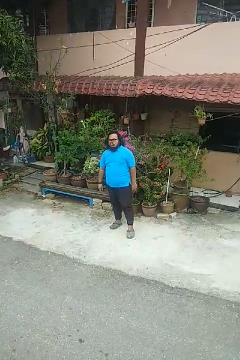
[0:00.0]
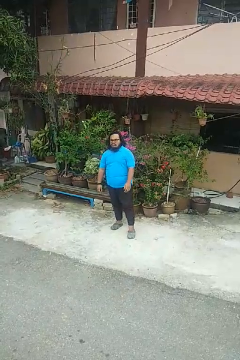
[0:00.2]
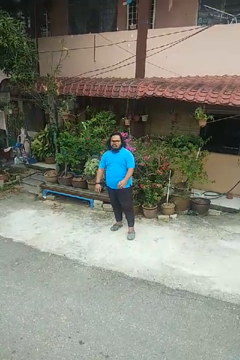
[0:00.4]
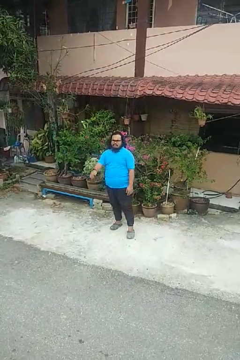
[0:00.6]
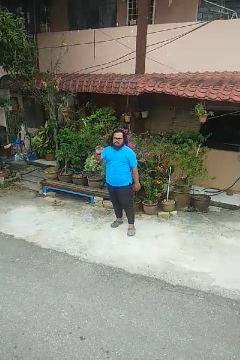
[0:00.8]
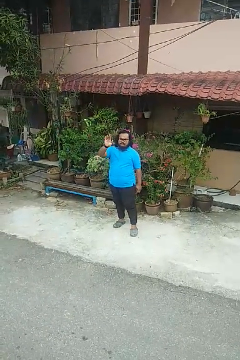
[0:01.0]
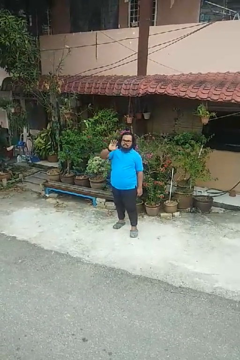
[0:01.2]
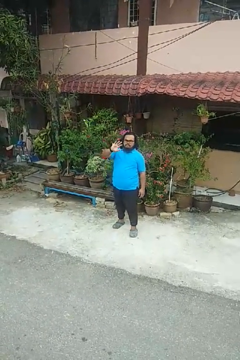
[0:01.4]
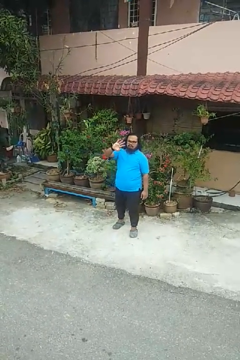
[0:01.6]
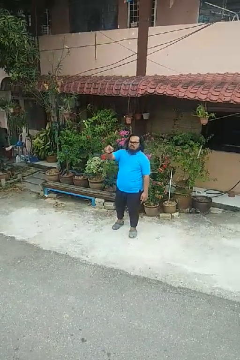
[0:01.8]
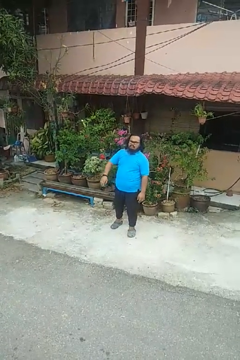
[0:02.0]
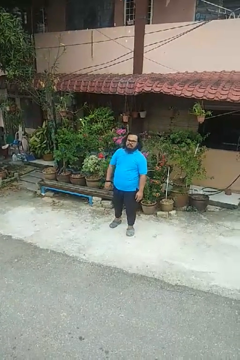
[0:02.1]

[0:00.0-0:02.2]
person waves at person

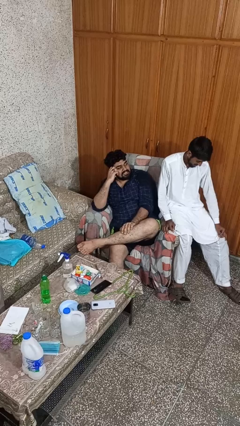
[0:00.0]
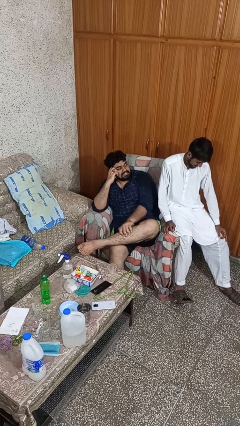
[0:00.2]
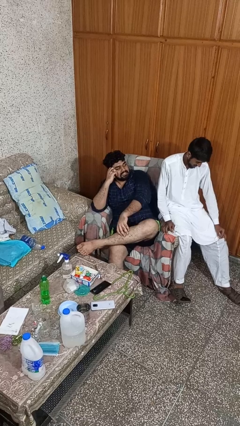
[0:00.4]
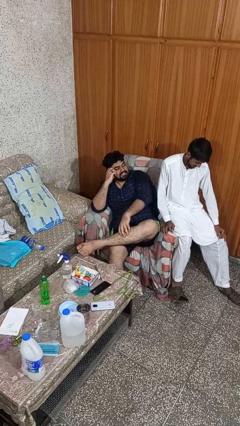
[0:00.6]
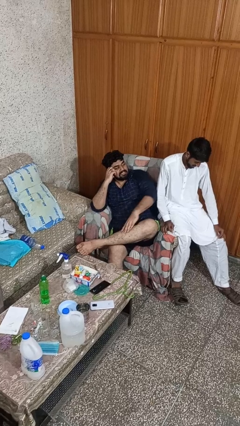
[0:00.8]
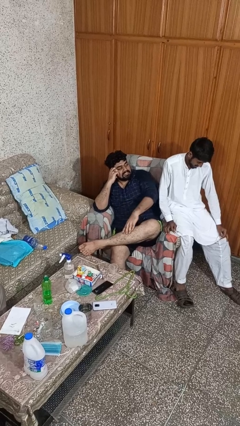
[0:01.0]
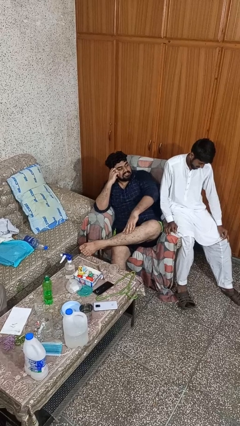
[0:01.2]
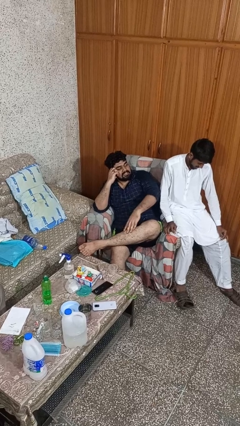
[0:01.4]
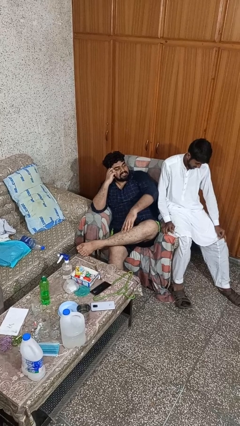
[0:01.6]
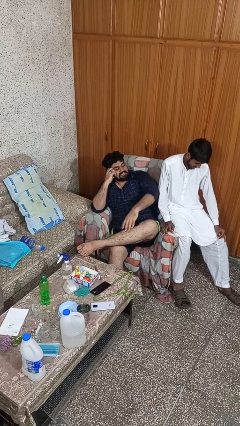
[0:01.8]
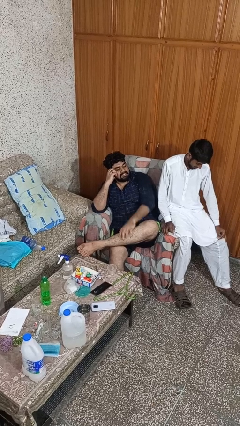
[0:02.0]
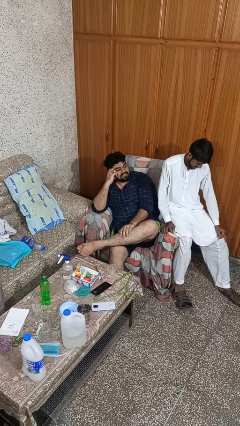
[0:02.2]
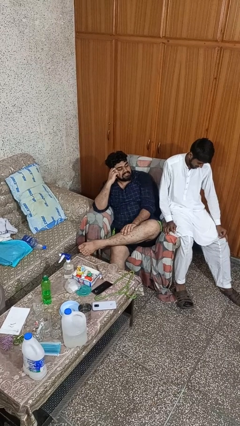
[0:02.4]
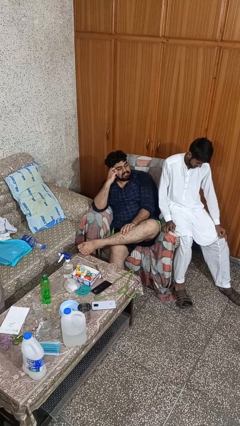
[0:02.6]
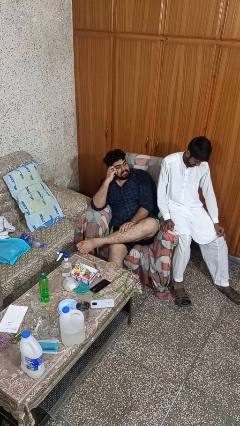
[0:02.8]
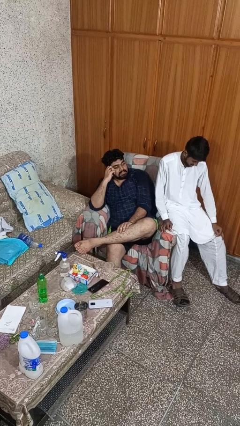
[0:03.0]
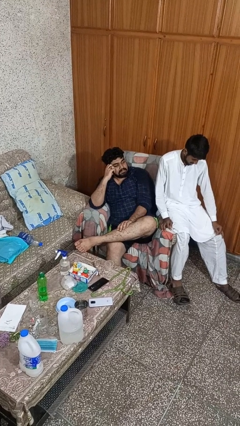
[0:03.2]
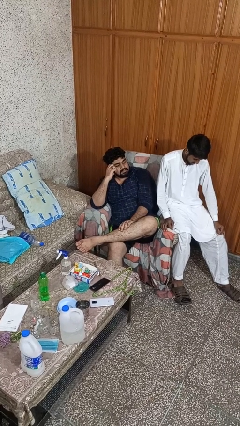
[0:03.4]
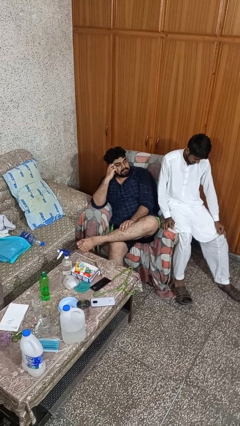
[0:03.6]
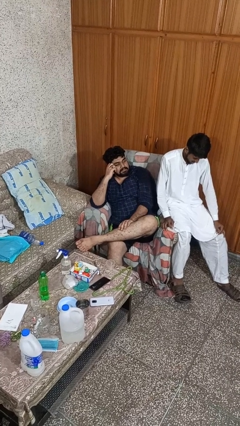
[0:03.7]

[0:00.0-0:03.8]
person nudges person with elbow

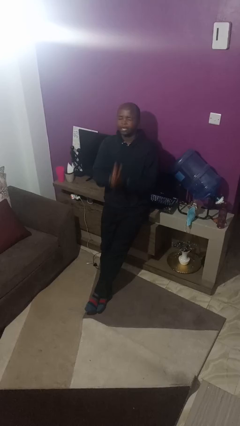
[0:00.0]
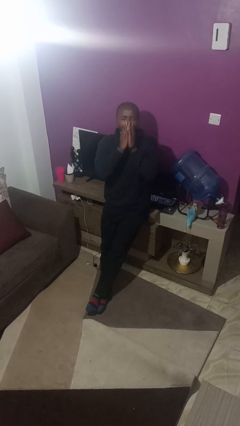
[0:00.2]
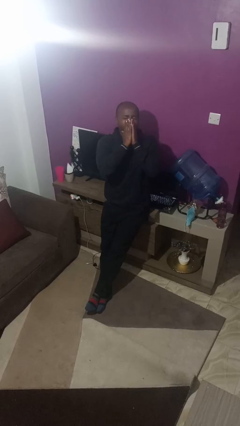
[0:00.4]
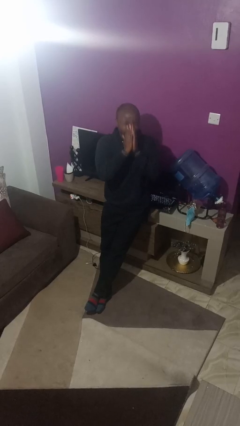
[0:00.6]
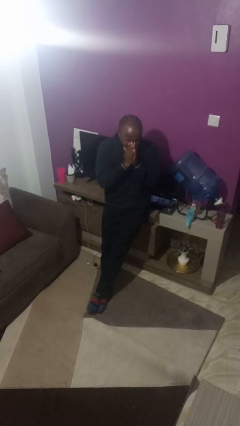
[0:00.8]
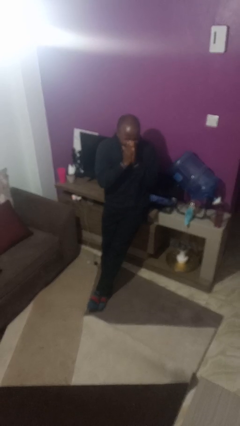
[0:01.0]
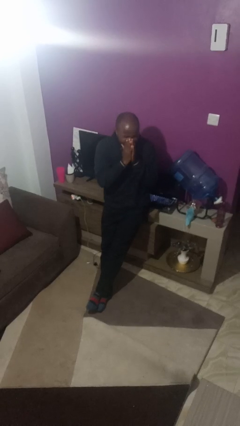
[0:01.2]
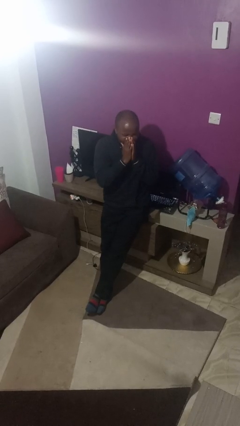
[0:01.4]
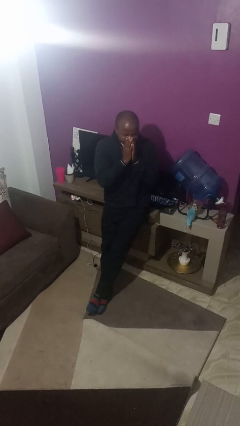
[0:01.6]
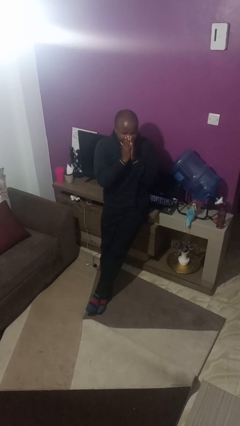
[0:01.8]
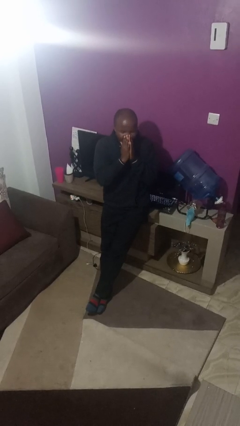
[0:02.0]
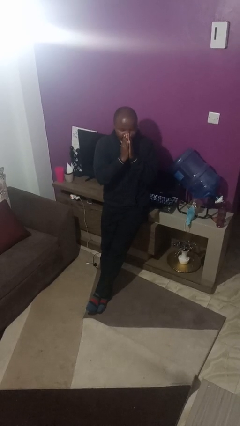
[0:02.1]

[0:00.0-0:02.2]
person sneezes into hand

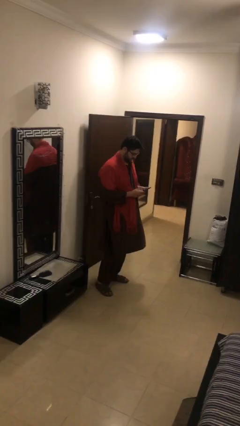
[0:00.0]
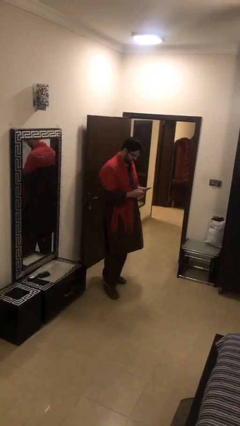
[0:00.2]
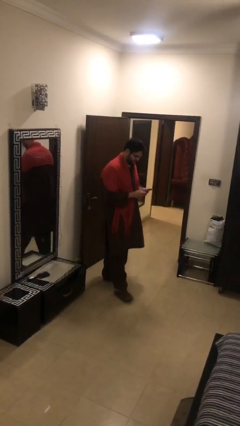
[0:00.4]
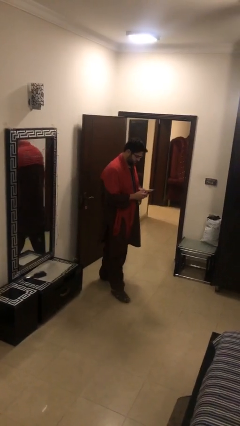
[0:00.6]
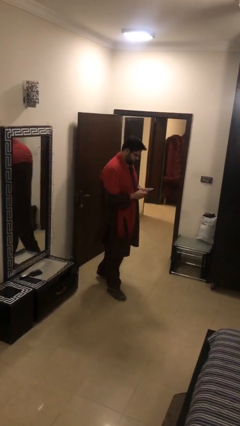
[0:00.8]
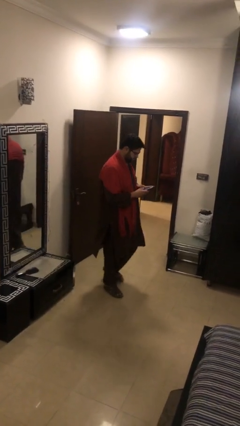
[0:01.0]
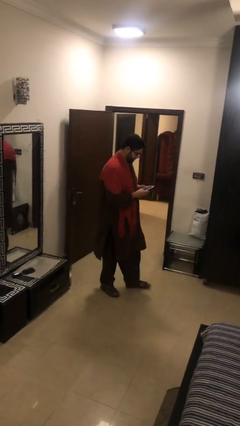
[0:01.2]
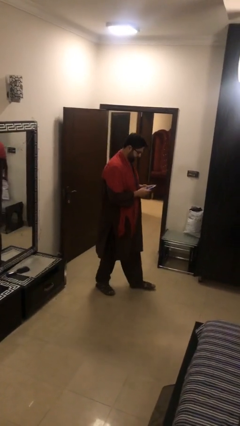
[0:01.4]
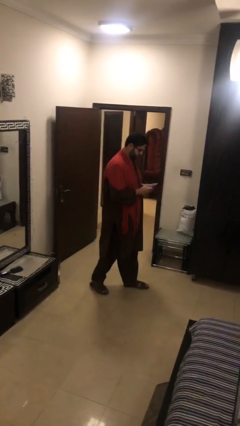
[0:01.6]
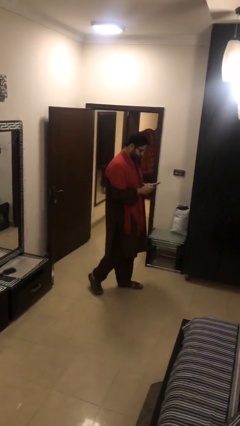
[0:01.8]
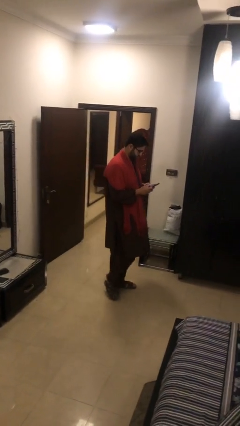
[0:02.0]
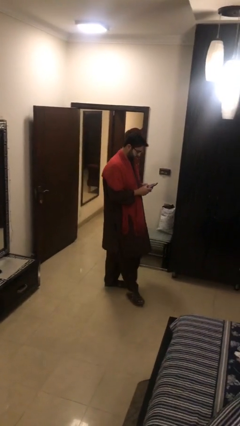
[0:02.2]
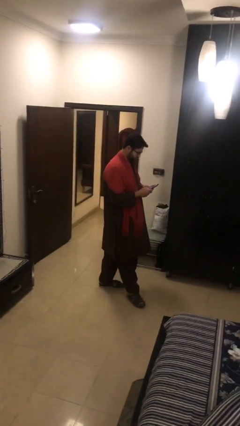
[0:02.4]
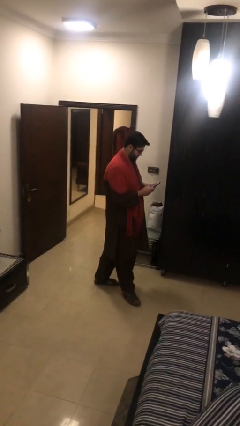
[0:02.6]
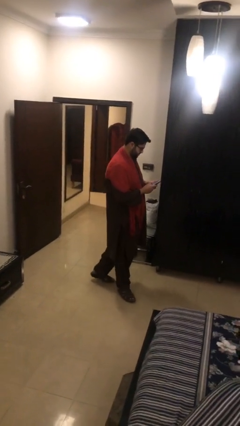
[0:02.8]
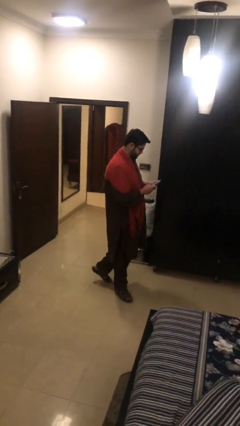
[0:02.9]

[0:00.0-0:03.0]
person texts on phone

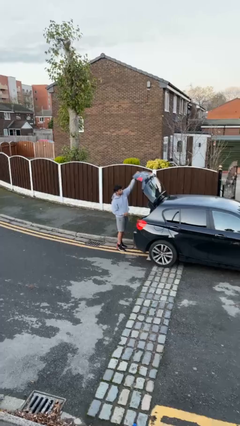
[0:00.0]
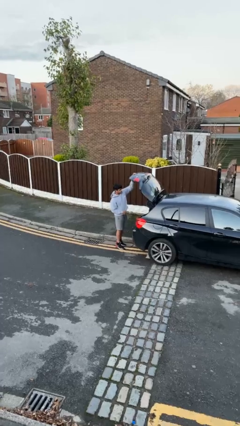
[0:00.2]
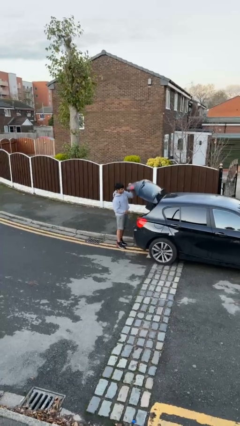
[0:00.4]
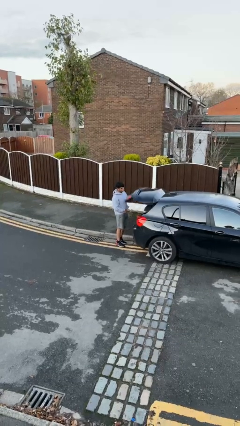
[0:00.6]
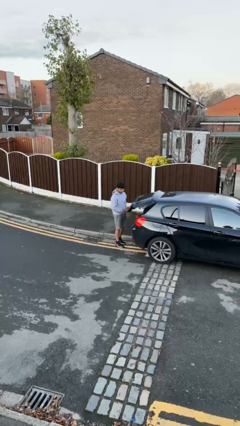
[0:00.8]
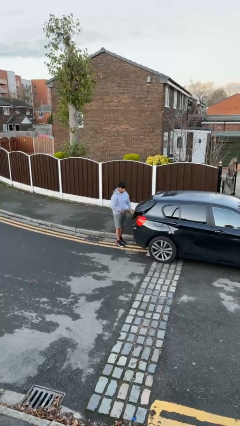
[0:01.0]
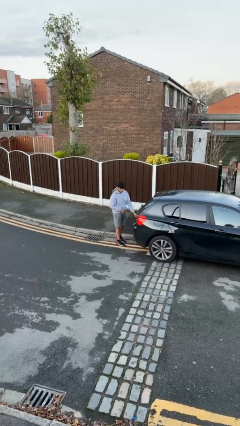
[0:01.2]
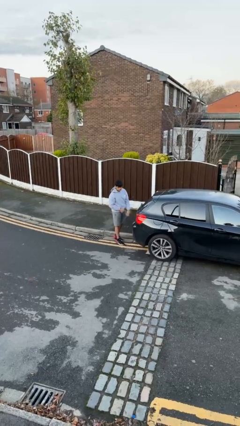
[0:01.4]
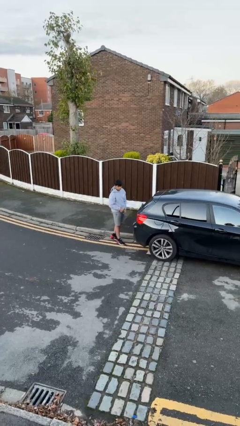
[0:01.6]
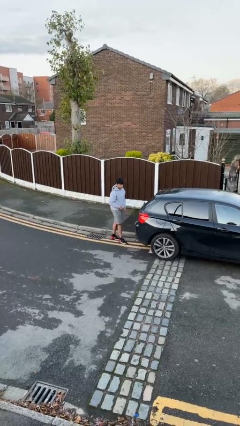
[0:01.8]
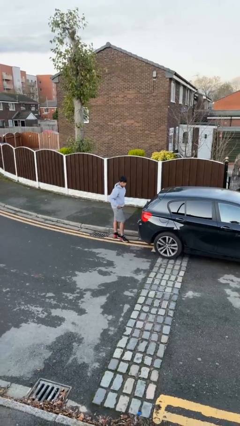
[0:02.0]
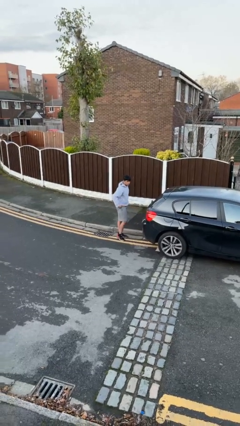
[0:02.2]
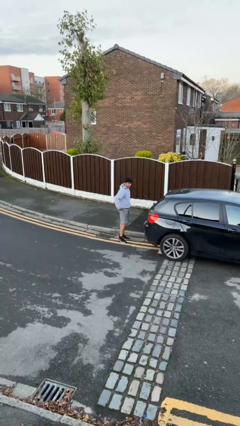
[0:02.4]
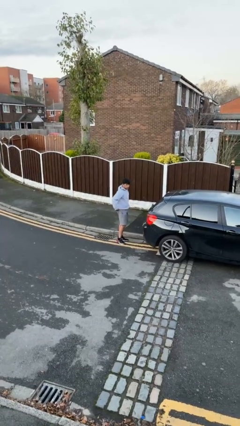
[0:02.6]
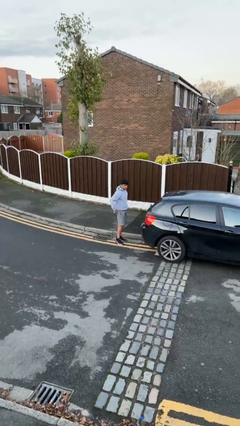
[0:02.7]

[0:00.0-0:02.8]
person closes car trunk

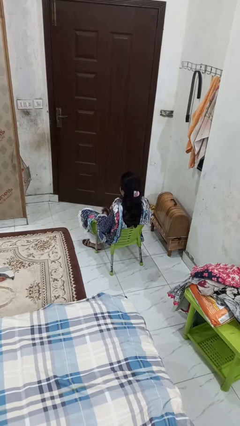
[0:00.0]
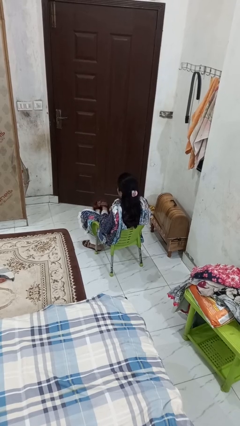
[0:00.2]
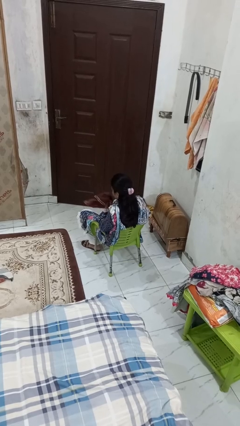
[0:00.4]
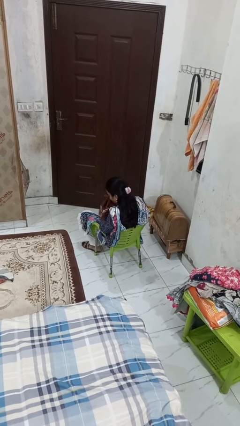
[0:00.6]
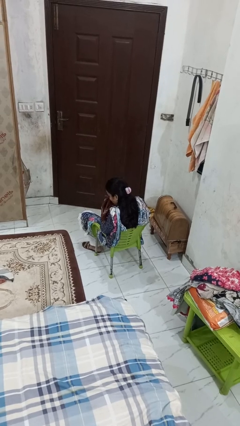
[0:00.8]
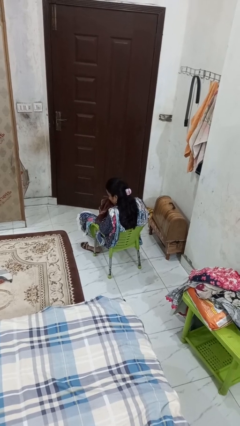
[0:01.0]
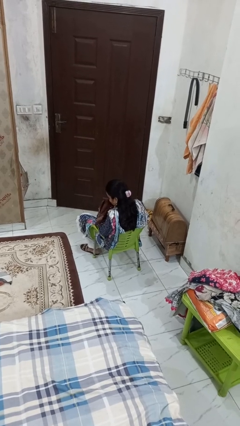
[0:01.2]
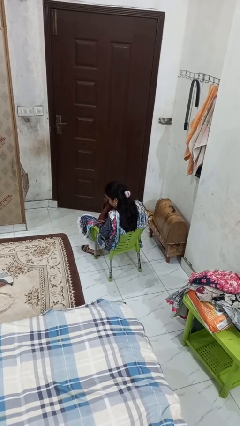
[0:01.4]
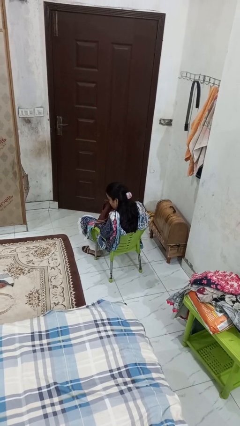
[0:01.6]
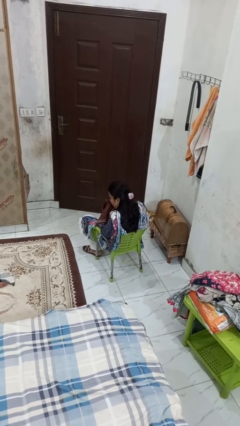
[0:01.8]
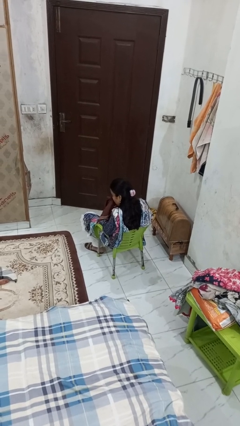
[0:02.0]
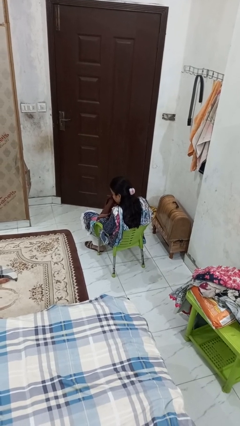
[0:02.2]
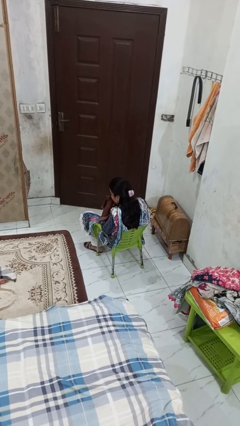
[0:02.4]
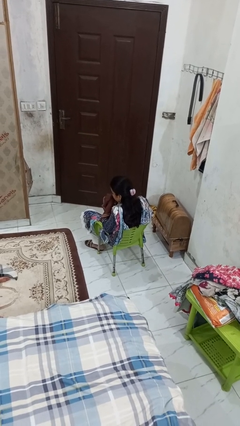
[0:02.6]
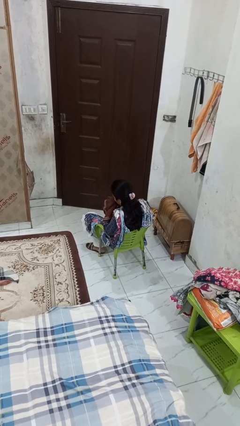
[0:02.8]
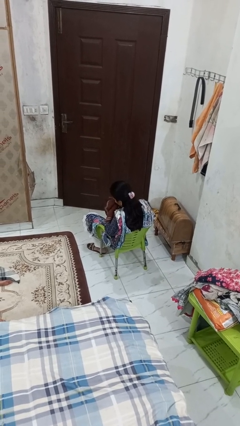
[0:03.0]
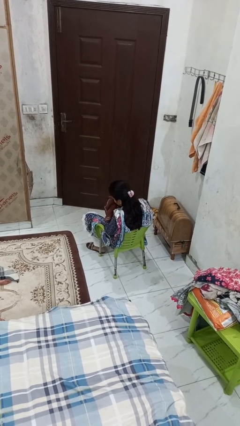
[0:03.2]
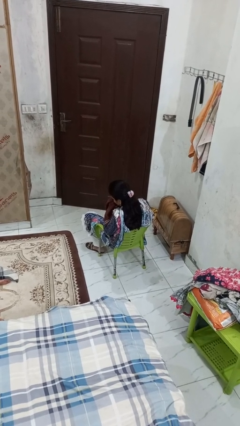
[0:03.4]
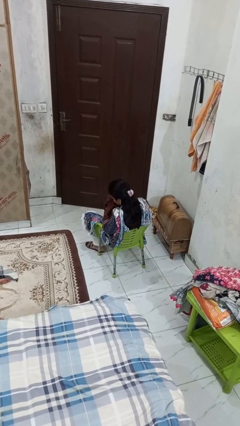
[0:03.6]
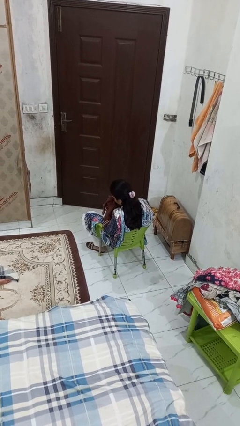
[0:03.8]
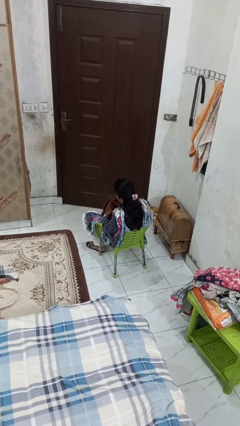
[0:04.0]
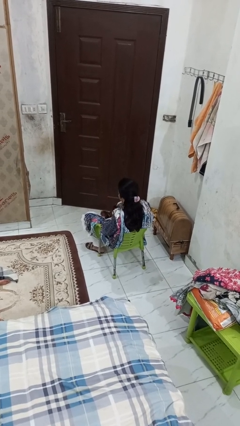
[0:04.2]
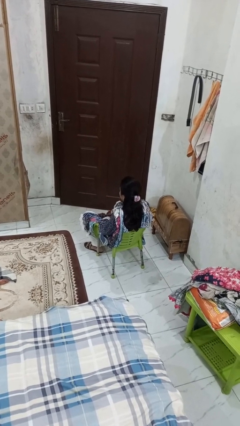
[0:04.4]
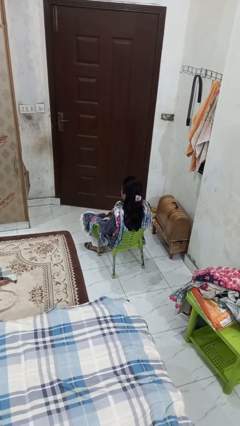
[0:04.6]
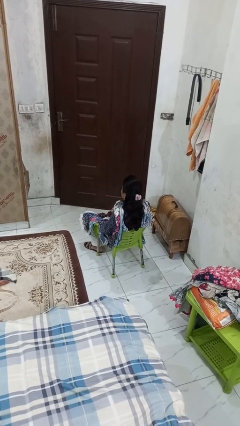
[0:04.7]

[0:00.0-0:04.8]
person blows nose
